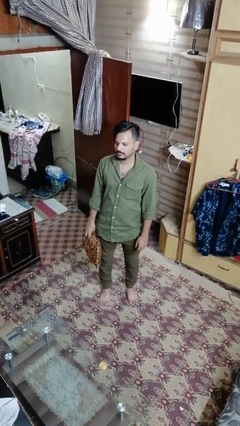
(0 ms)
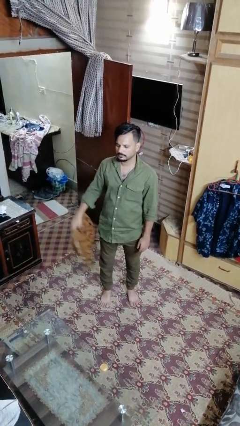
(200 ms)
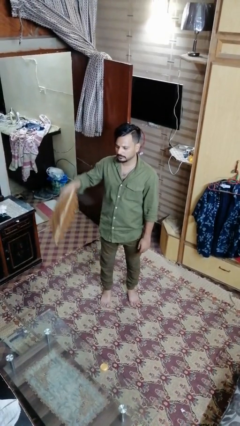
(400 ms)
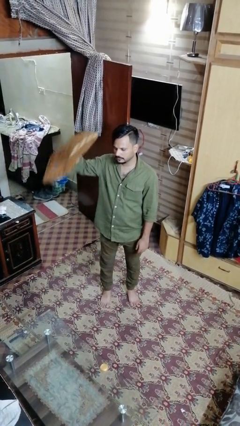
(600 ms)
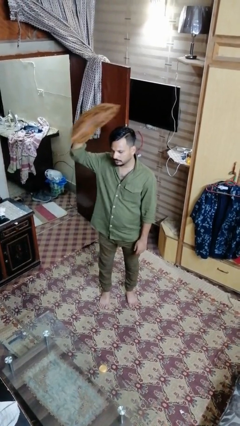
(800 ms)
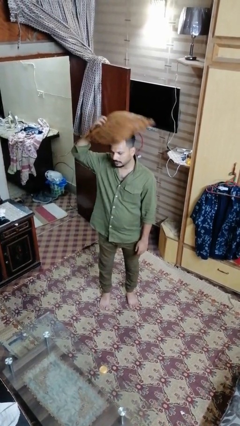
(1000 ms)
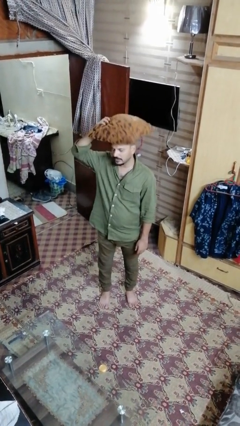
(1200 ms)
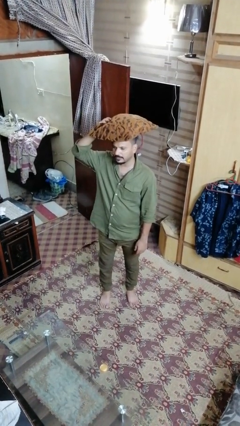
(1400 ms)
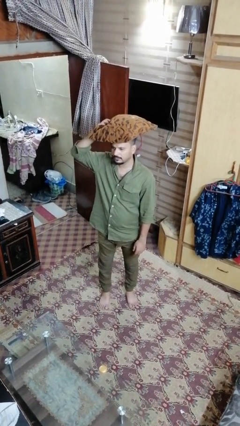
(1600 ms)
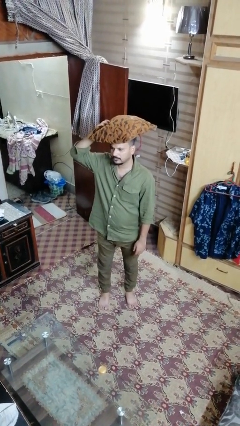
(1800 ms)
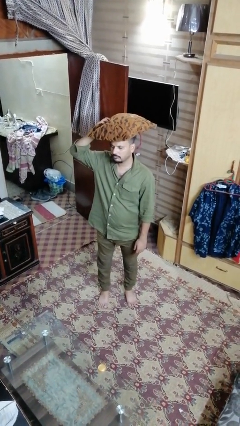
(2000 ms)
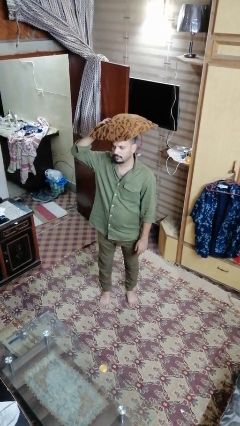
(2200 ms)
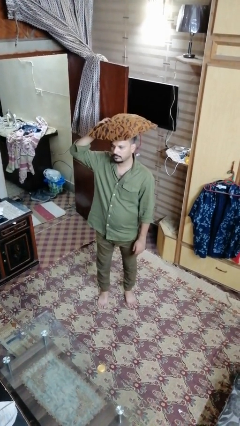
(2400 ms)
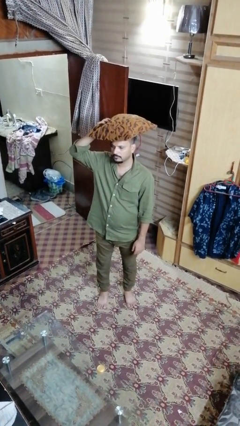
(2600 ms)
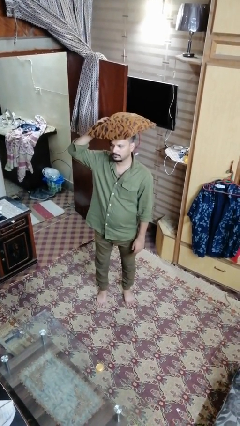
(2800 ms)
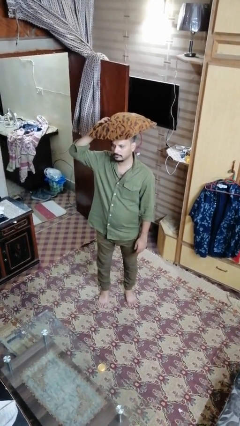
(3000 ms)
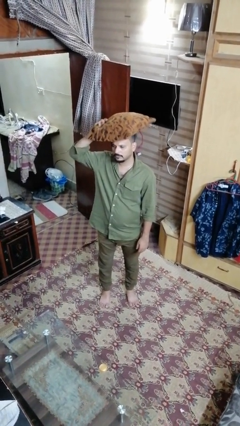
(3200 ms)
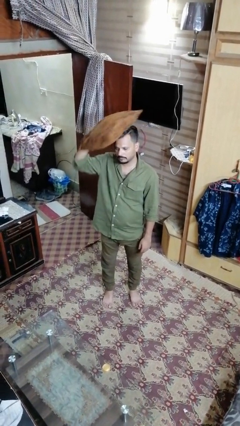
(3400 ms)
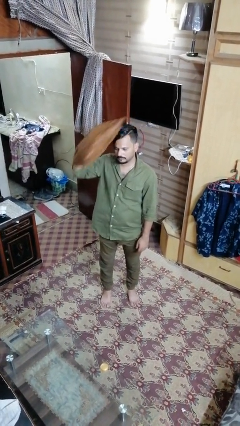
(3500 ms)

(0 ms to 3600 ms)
person holds object above head

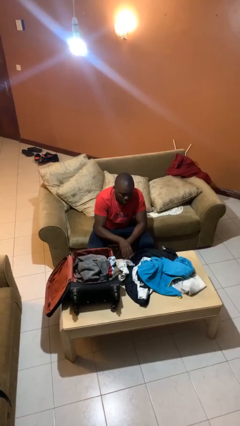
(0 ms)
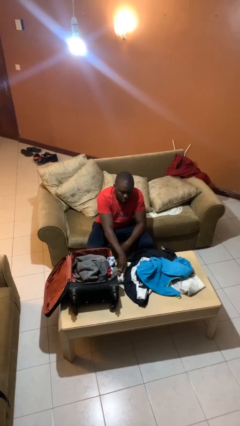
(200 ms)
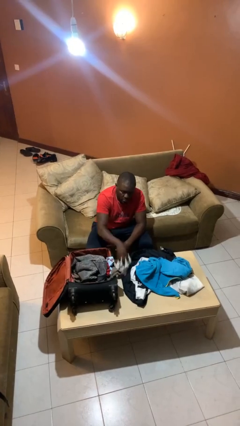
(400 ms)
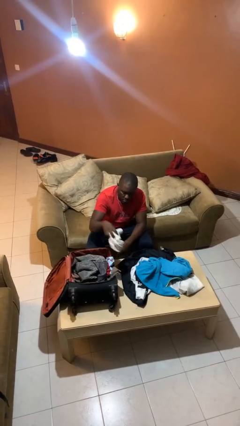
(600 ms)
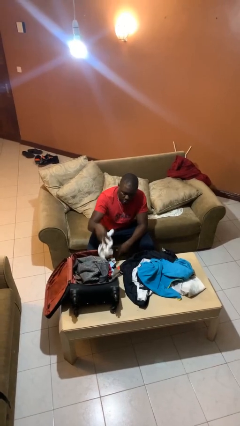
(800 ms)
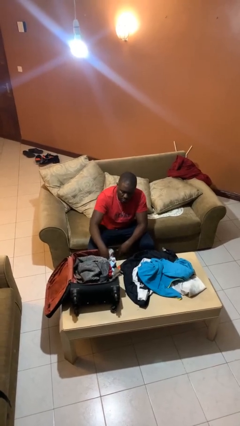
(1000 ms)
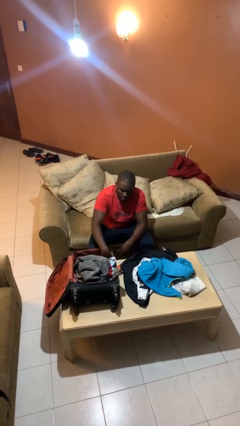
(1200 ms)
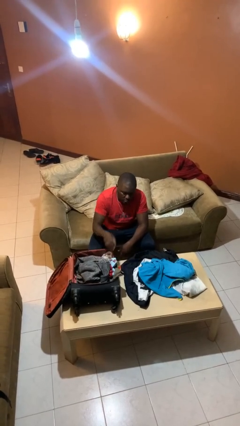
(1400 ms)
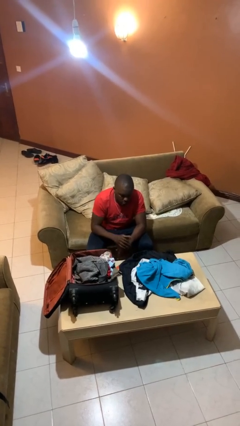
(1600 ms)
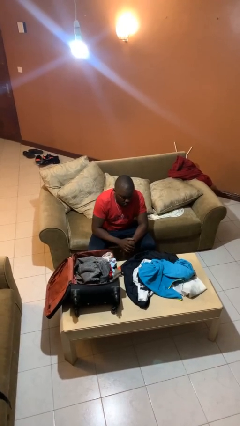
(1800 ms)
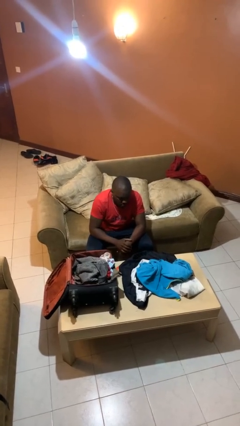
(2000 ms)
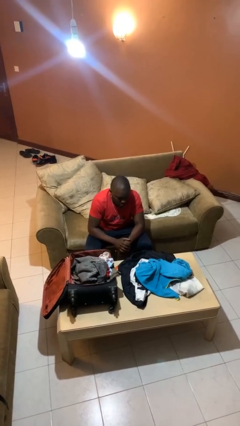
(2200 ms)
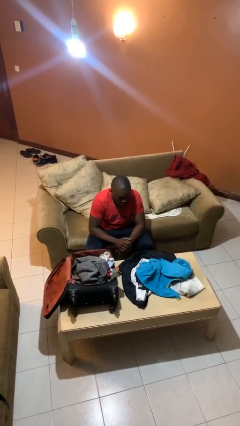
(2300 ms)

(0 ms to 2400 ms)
person loads clothes into suitcase

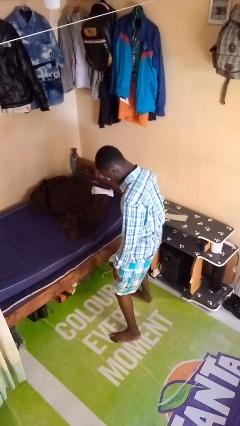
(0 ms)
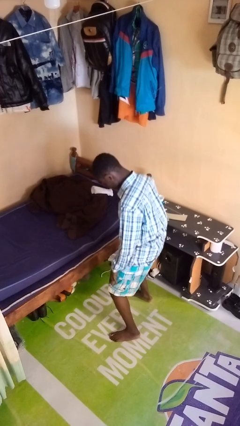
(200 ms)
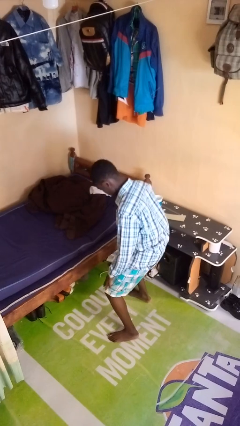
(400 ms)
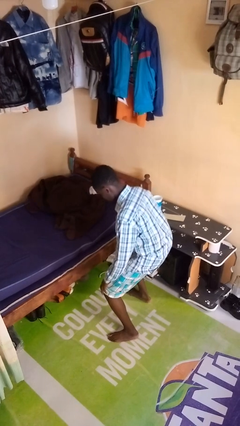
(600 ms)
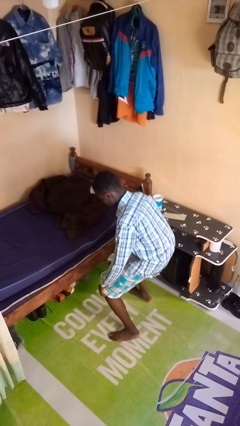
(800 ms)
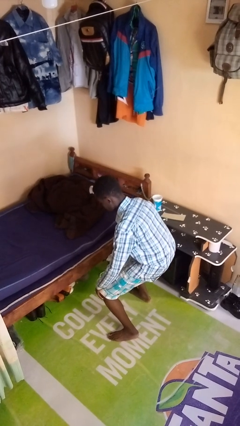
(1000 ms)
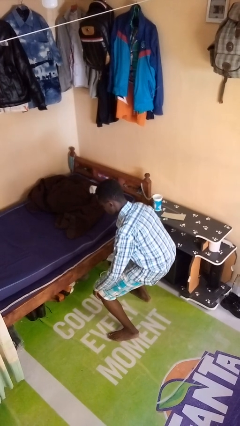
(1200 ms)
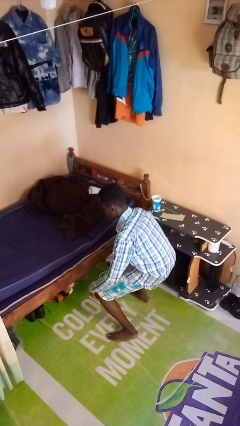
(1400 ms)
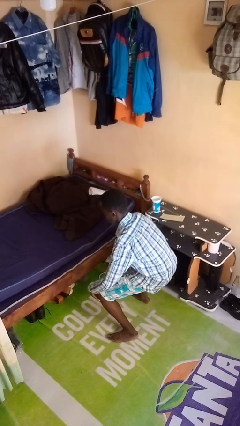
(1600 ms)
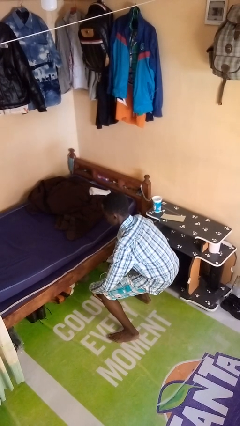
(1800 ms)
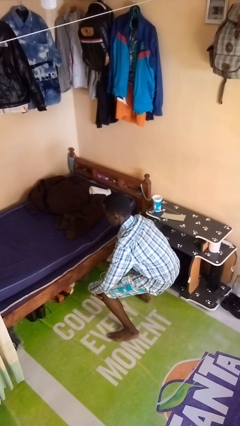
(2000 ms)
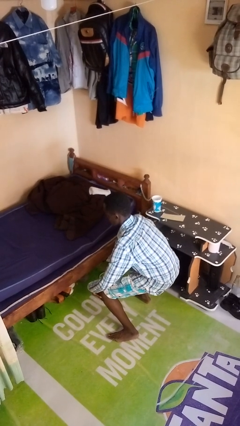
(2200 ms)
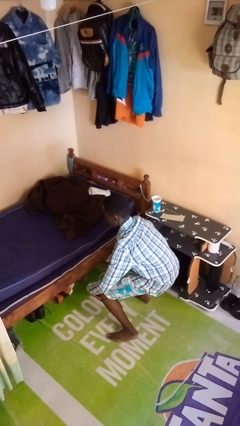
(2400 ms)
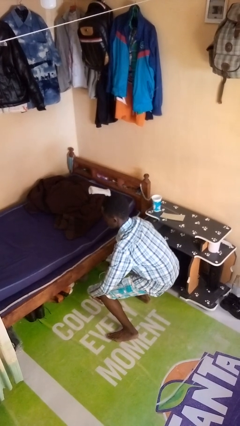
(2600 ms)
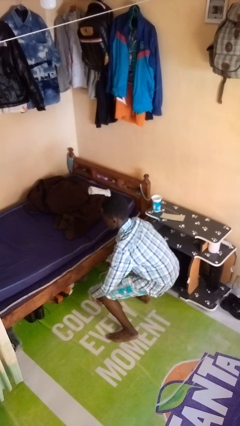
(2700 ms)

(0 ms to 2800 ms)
person squats

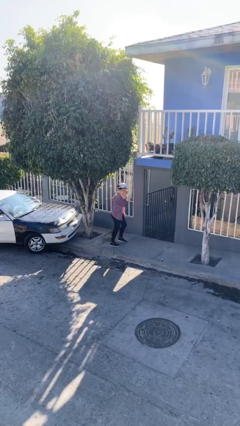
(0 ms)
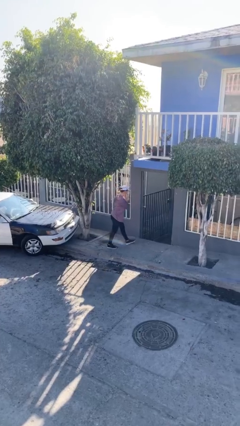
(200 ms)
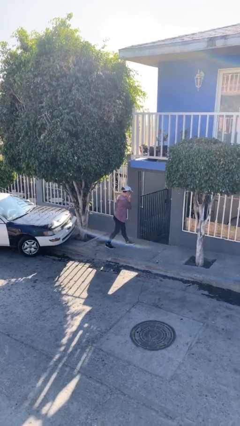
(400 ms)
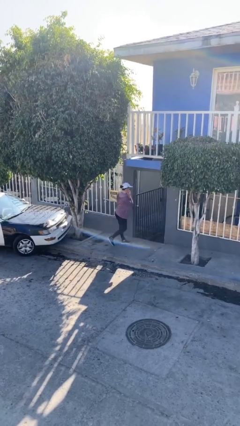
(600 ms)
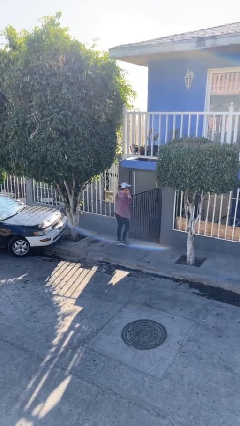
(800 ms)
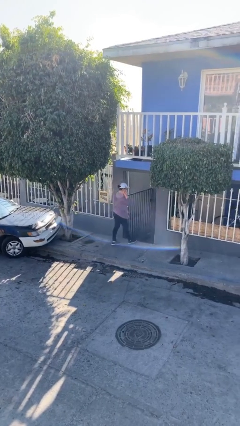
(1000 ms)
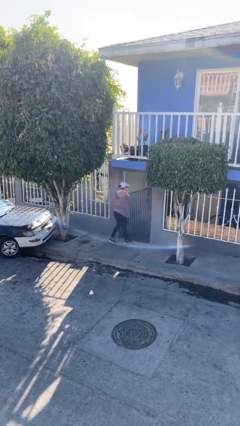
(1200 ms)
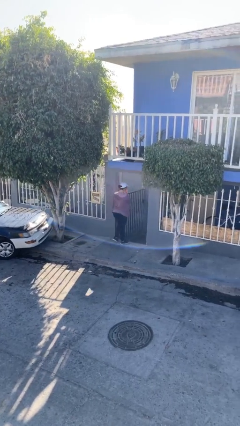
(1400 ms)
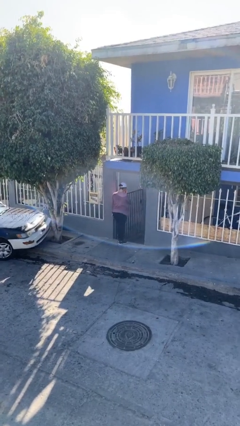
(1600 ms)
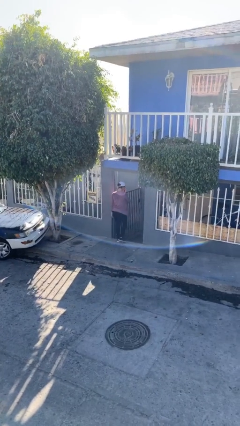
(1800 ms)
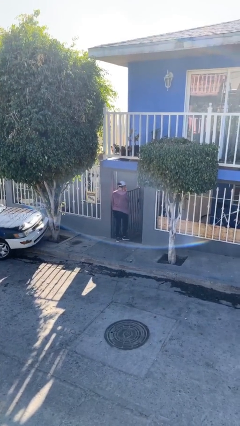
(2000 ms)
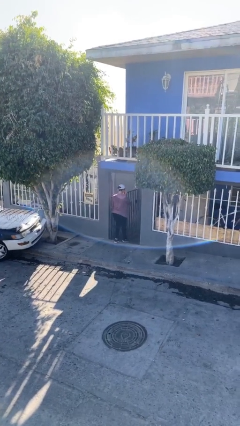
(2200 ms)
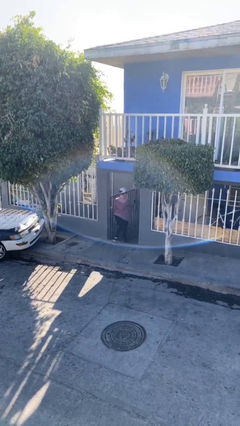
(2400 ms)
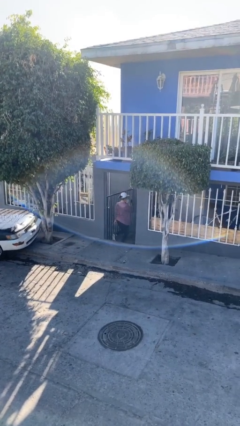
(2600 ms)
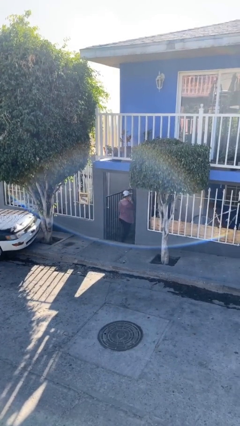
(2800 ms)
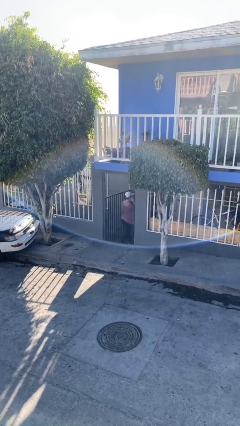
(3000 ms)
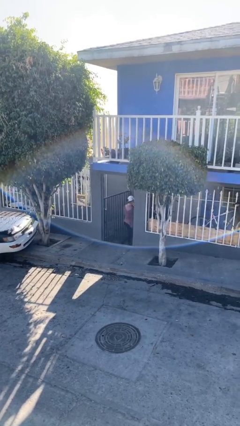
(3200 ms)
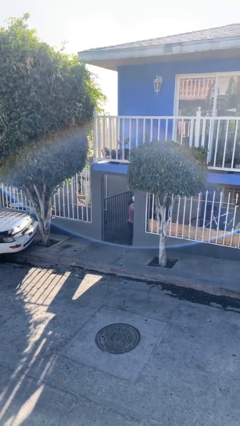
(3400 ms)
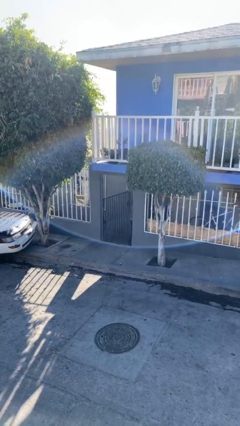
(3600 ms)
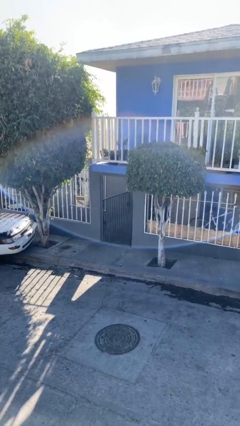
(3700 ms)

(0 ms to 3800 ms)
person exits scene through structure

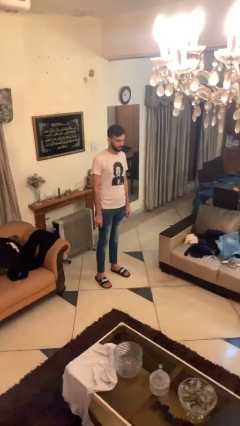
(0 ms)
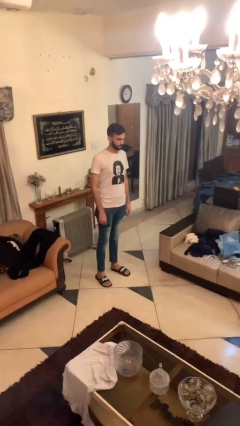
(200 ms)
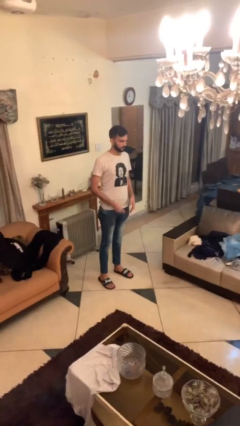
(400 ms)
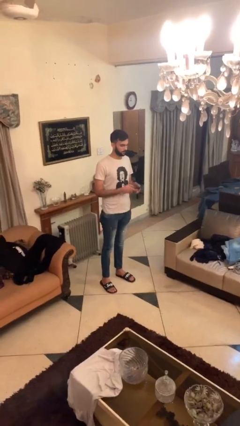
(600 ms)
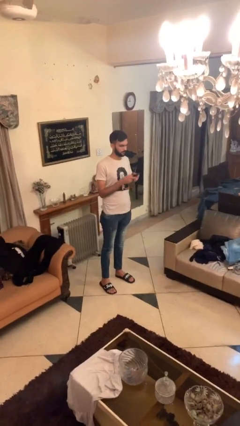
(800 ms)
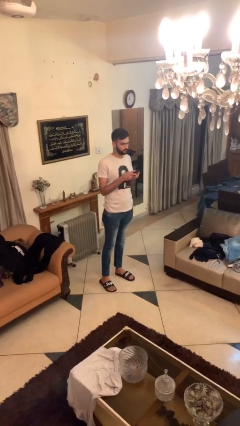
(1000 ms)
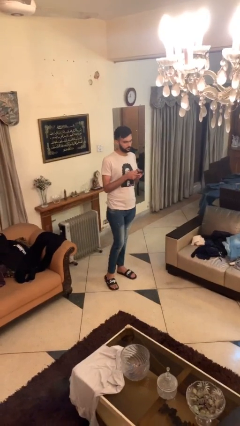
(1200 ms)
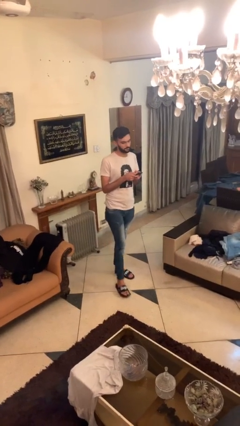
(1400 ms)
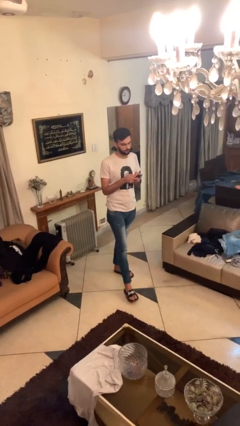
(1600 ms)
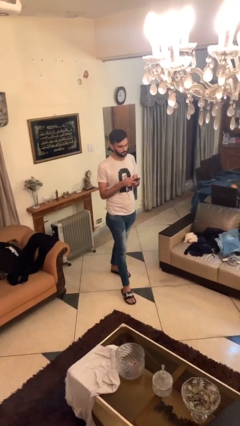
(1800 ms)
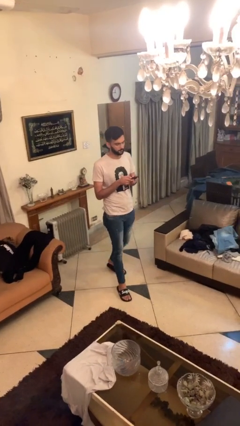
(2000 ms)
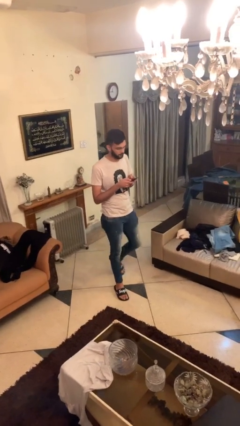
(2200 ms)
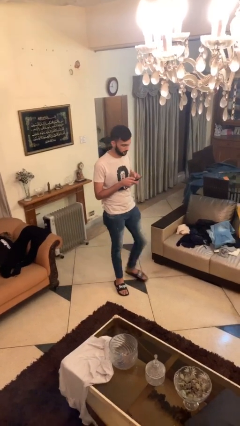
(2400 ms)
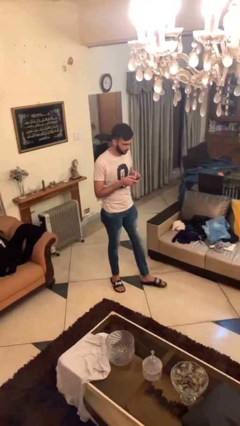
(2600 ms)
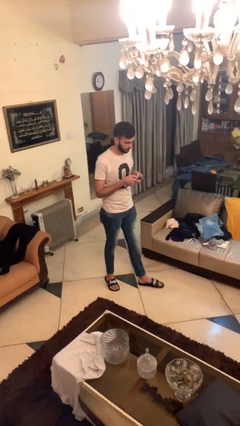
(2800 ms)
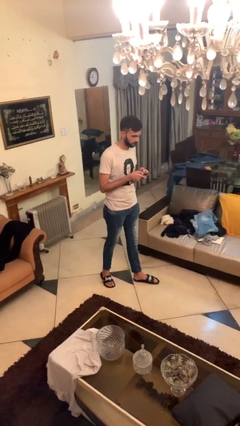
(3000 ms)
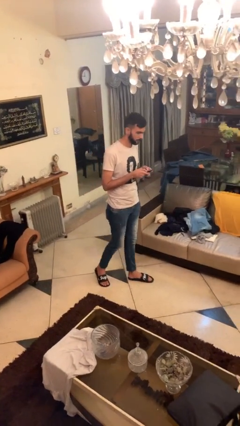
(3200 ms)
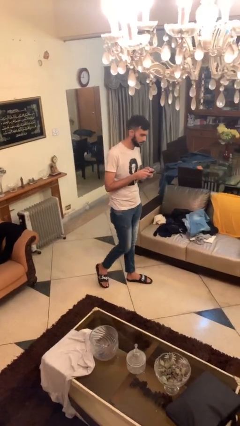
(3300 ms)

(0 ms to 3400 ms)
person texts on phone

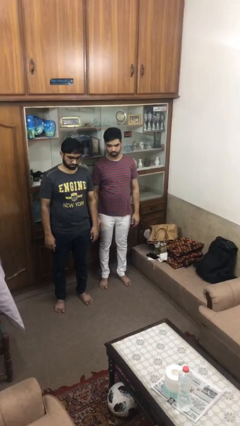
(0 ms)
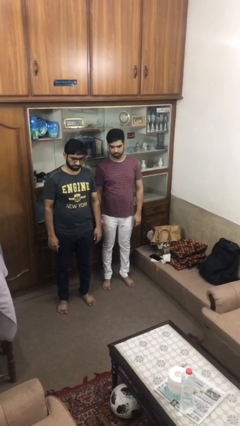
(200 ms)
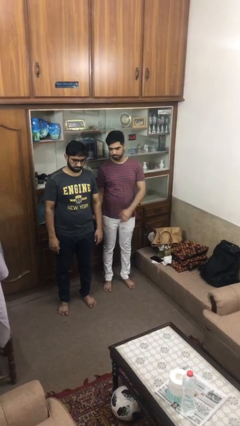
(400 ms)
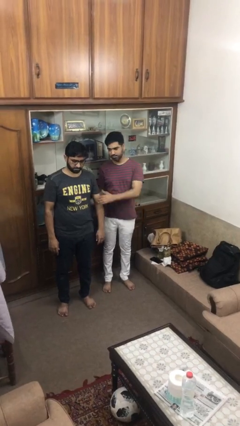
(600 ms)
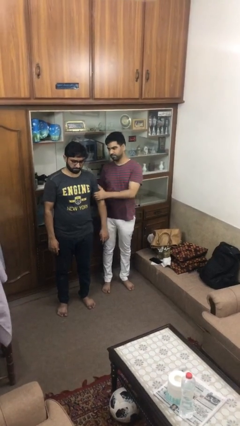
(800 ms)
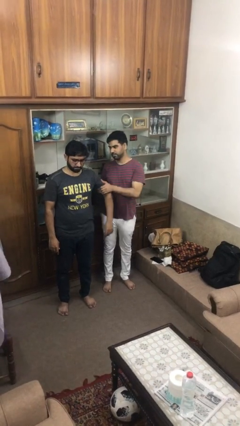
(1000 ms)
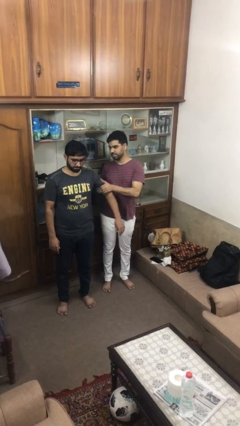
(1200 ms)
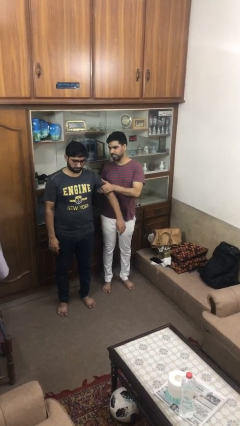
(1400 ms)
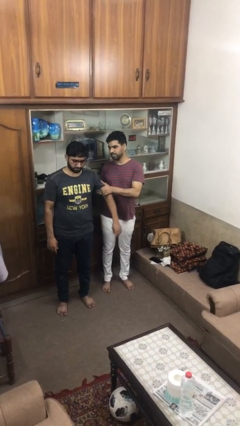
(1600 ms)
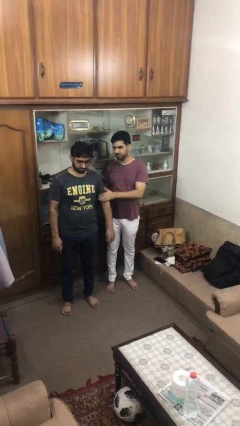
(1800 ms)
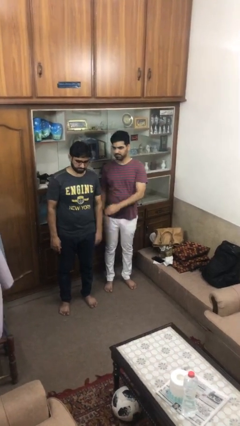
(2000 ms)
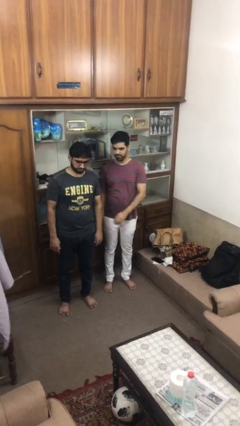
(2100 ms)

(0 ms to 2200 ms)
person grabs person by bicep
